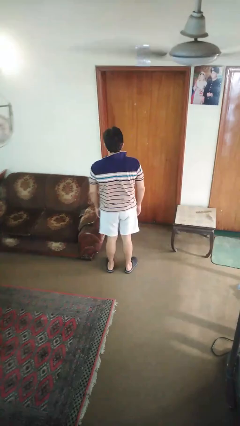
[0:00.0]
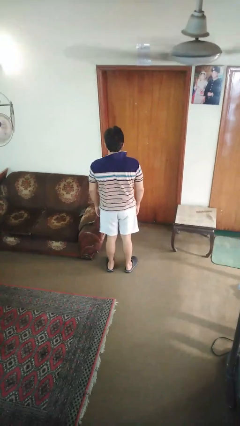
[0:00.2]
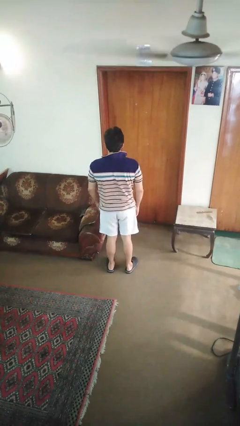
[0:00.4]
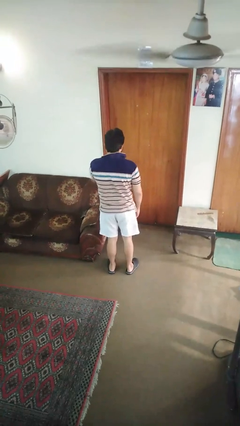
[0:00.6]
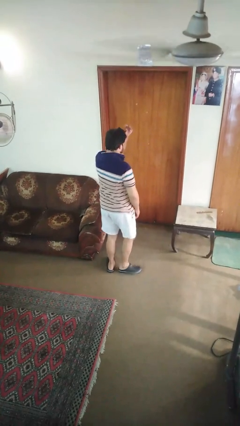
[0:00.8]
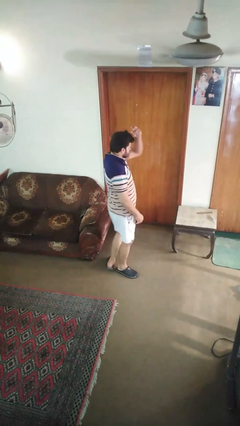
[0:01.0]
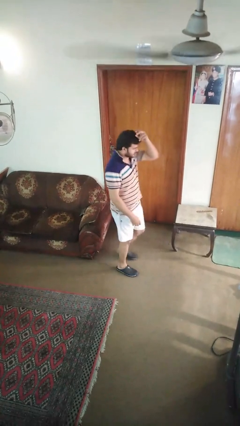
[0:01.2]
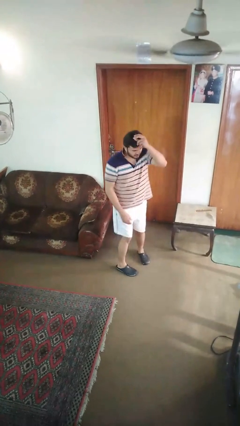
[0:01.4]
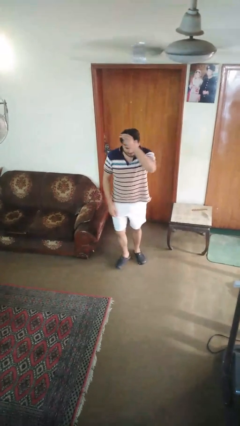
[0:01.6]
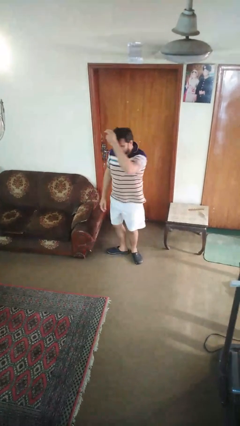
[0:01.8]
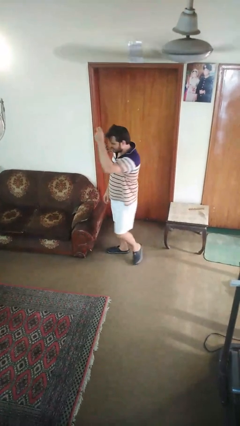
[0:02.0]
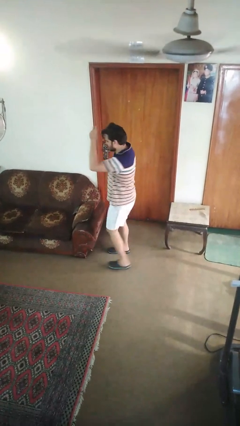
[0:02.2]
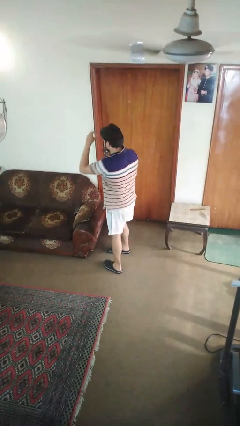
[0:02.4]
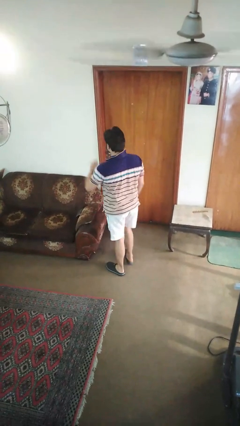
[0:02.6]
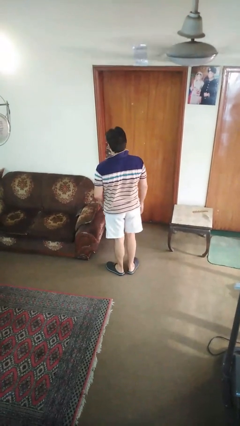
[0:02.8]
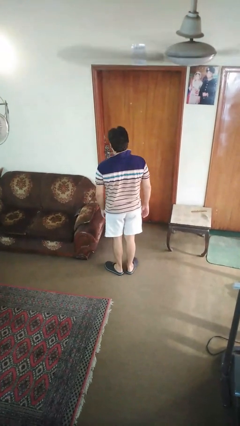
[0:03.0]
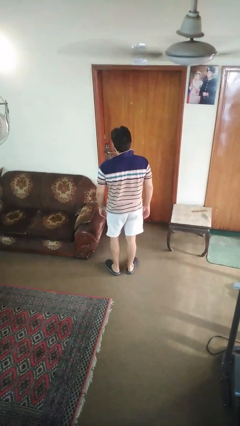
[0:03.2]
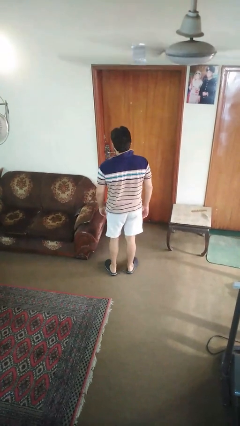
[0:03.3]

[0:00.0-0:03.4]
person twirls

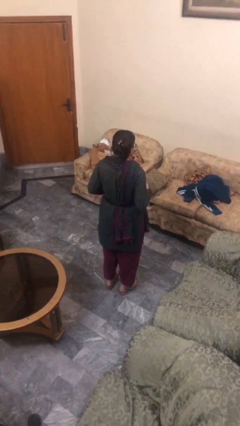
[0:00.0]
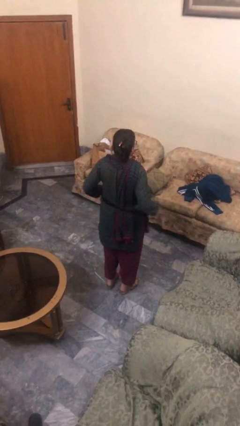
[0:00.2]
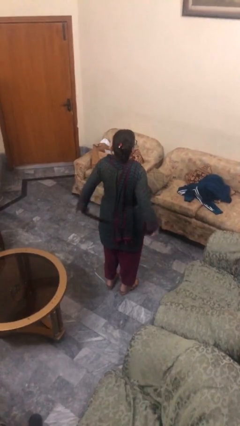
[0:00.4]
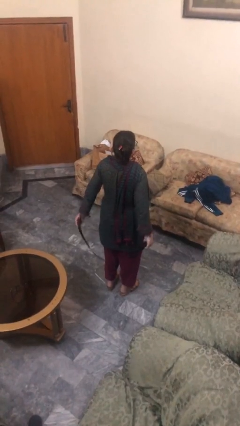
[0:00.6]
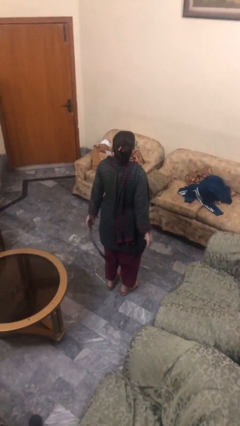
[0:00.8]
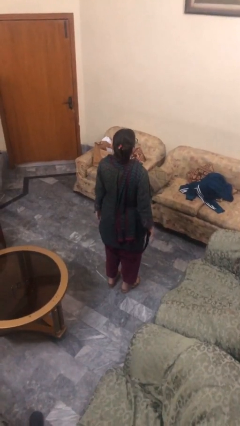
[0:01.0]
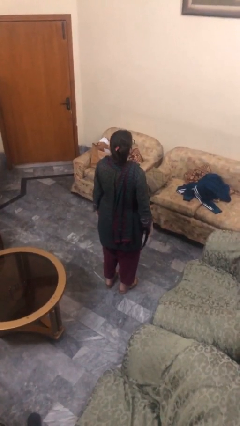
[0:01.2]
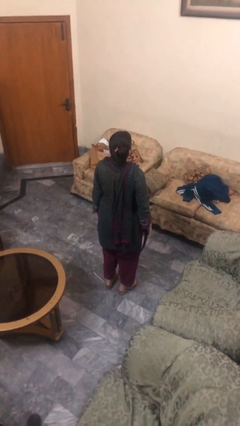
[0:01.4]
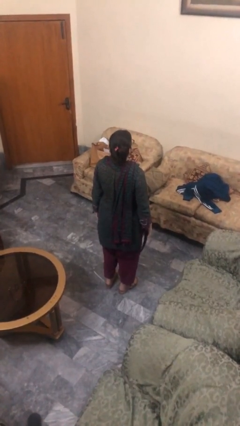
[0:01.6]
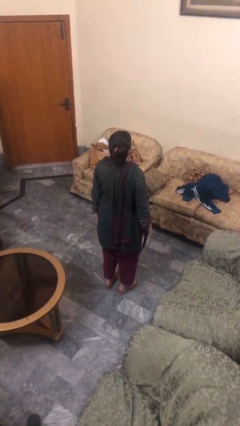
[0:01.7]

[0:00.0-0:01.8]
person takes off belt

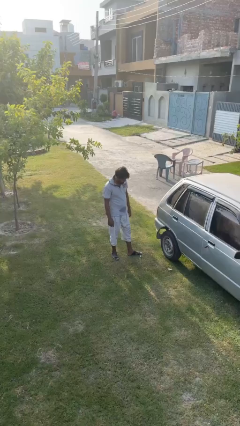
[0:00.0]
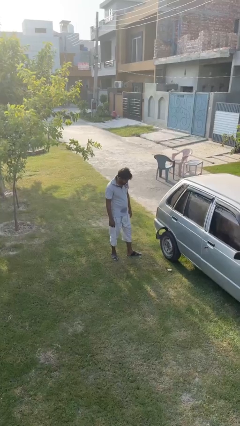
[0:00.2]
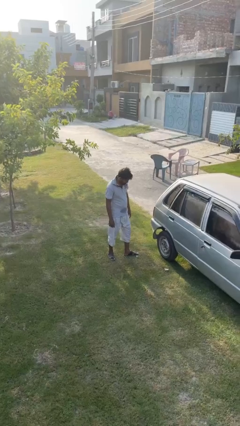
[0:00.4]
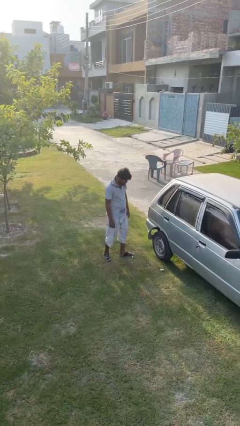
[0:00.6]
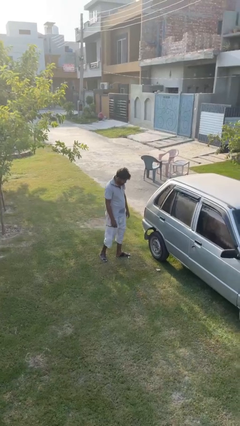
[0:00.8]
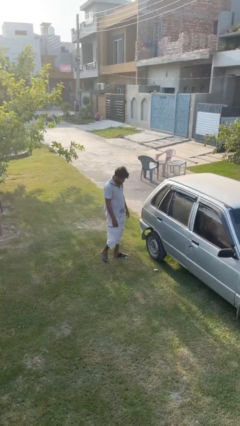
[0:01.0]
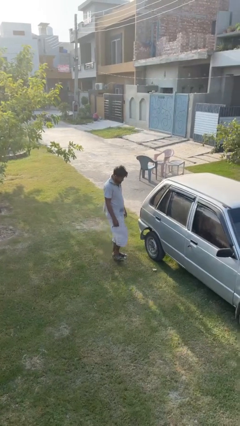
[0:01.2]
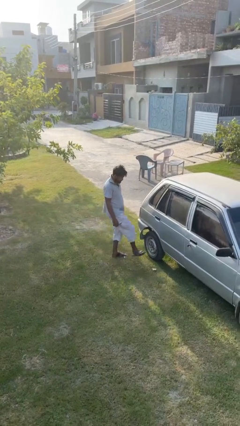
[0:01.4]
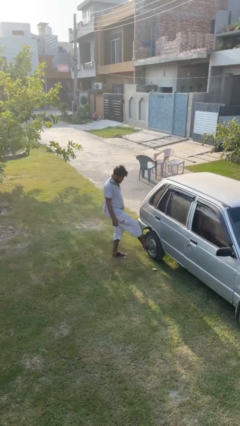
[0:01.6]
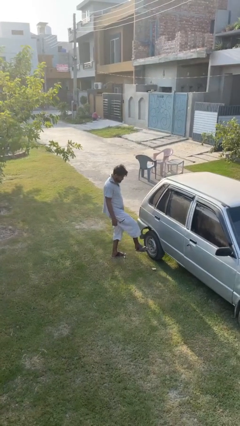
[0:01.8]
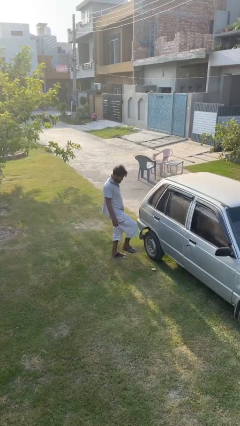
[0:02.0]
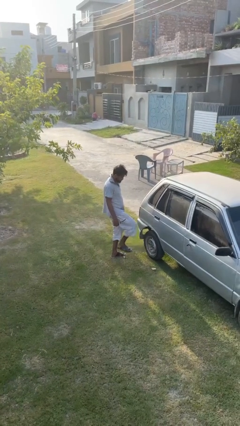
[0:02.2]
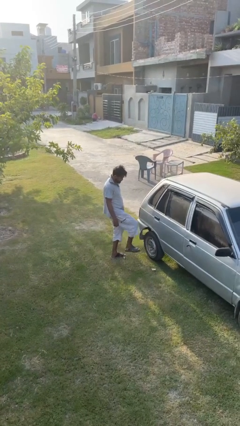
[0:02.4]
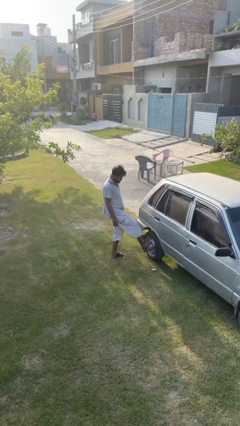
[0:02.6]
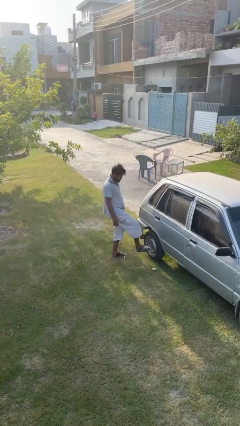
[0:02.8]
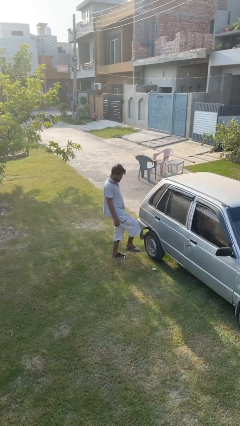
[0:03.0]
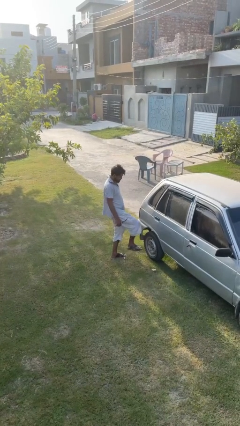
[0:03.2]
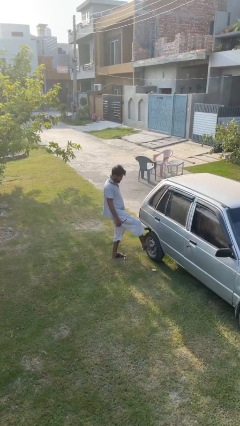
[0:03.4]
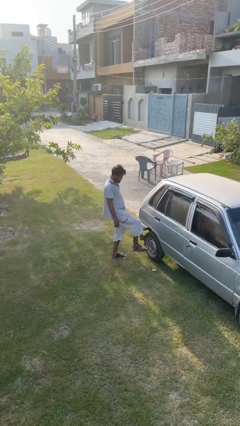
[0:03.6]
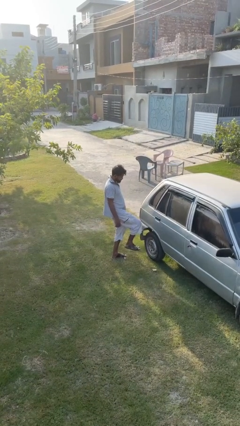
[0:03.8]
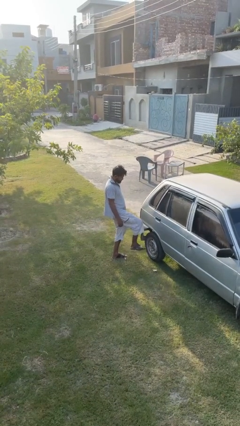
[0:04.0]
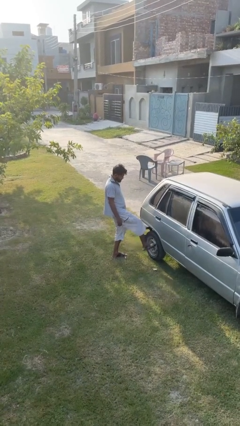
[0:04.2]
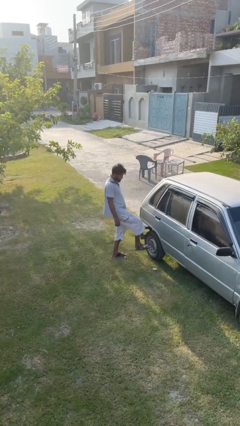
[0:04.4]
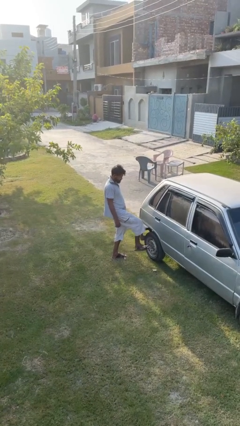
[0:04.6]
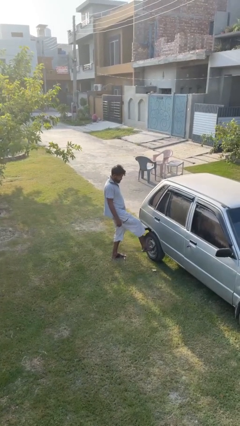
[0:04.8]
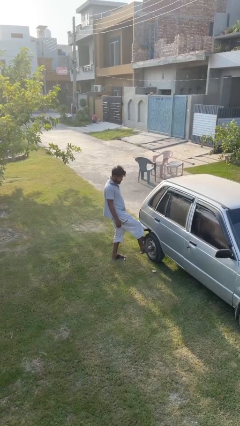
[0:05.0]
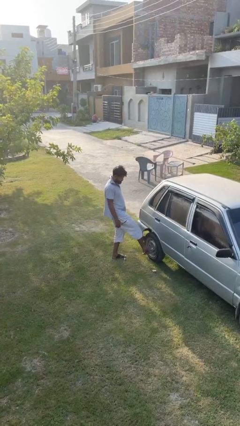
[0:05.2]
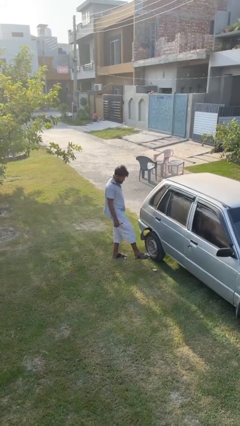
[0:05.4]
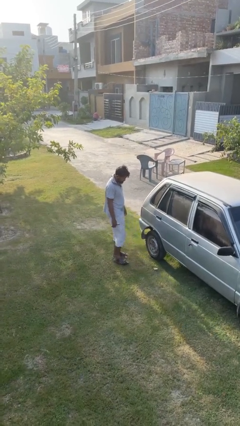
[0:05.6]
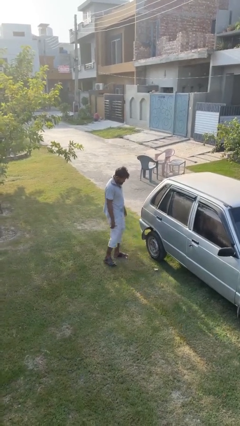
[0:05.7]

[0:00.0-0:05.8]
person kicks car tires

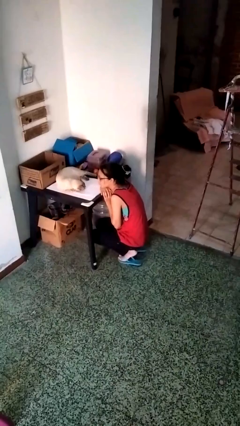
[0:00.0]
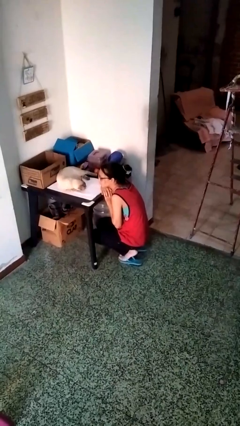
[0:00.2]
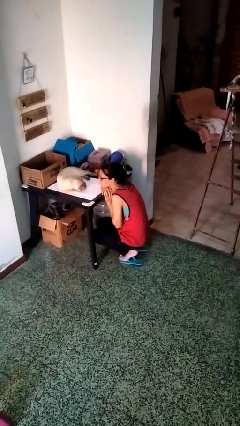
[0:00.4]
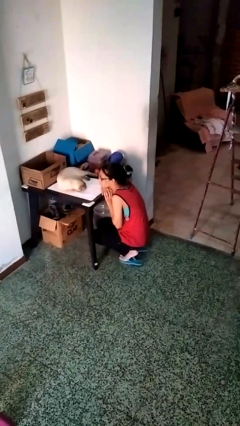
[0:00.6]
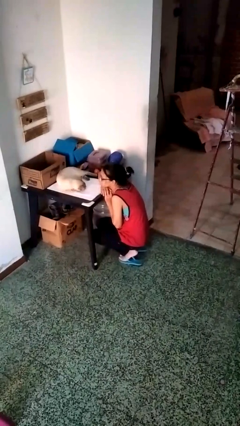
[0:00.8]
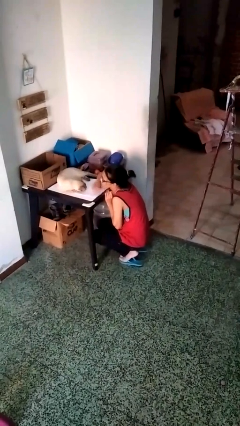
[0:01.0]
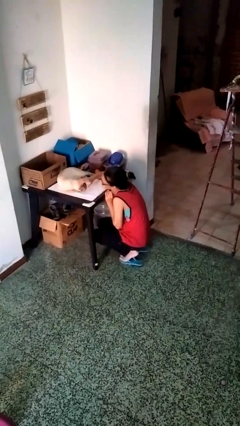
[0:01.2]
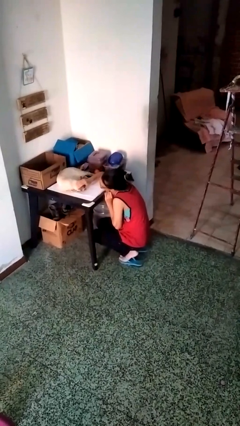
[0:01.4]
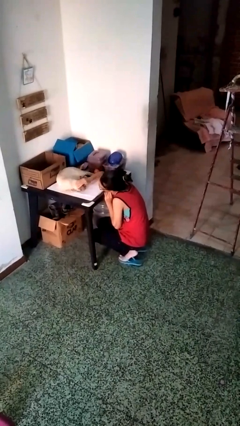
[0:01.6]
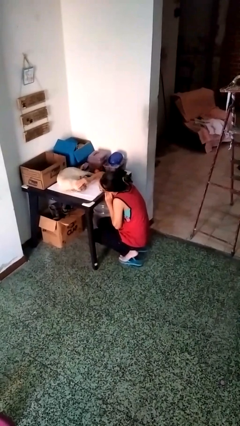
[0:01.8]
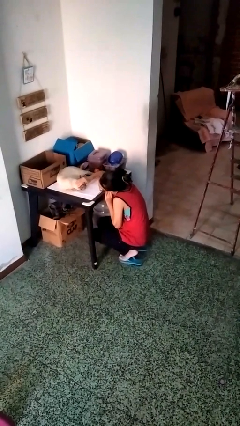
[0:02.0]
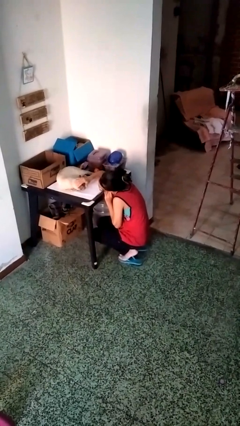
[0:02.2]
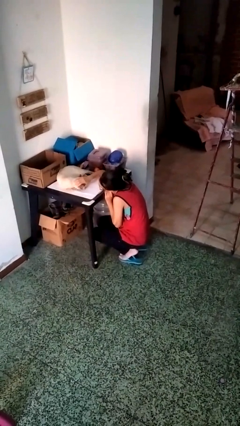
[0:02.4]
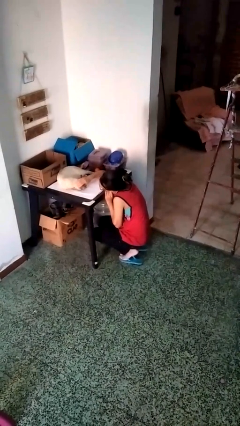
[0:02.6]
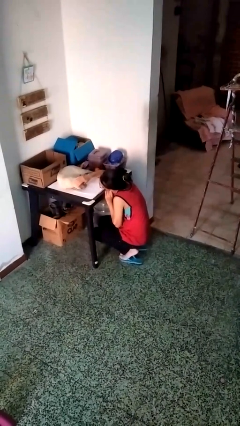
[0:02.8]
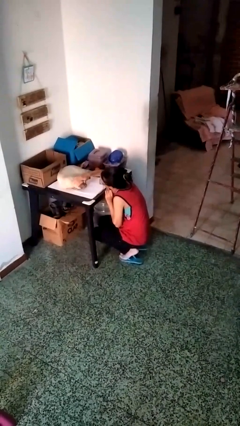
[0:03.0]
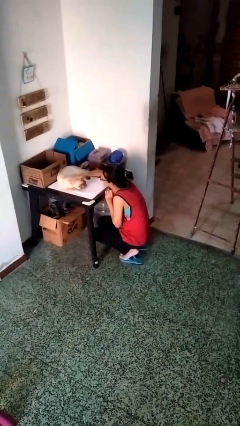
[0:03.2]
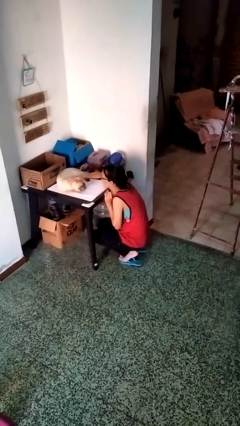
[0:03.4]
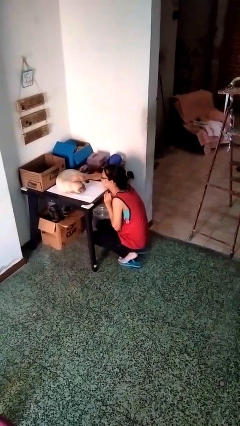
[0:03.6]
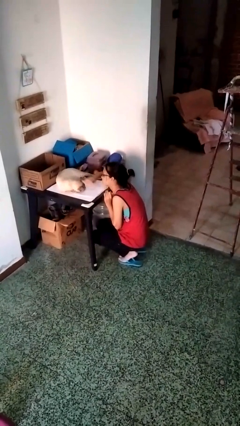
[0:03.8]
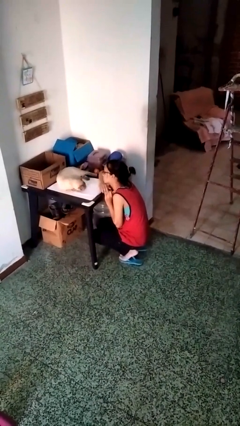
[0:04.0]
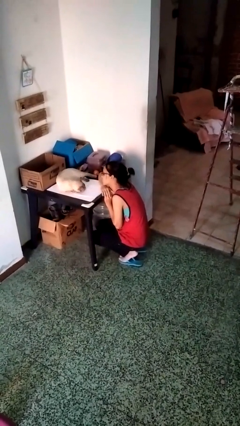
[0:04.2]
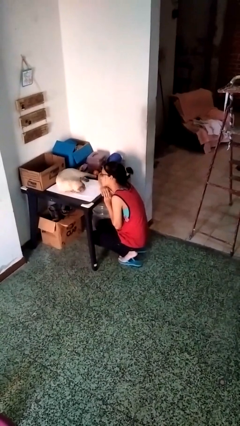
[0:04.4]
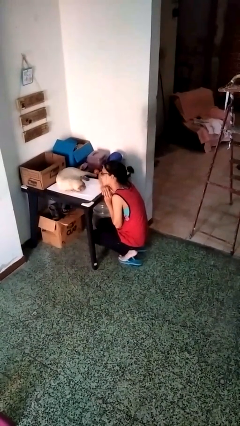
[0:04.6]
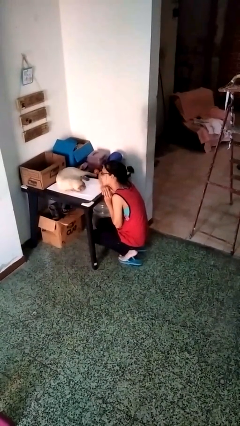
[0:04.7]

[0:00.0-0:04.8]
person pets cat

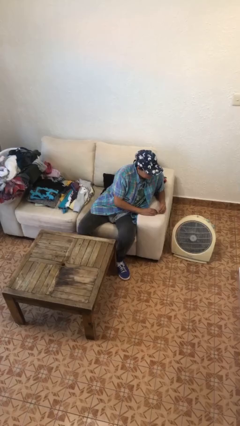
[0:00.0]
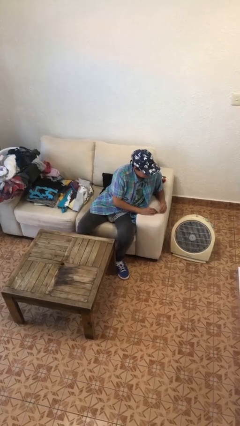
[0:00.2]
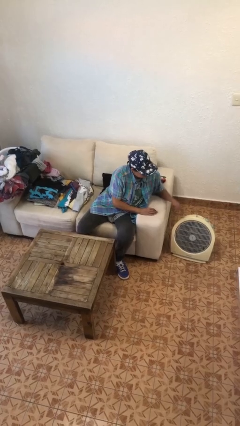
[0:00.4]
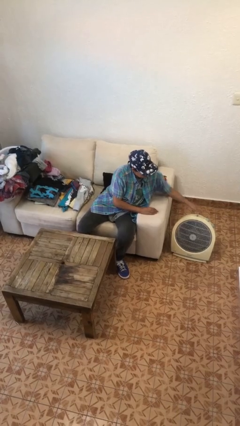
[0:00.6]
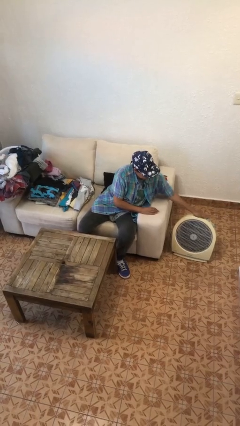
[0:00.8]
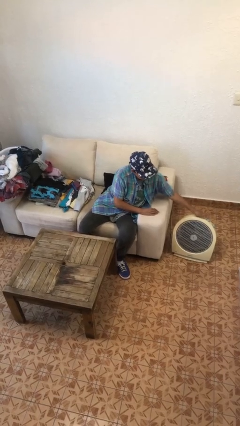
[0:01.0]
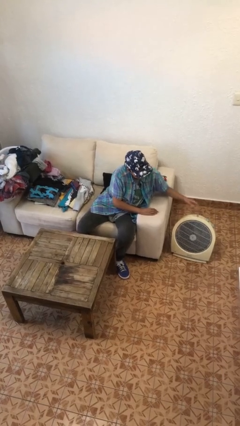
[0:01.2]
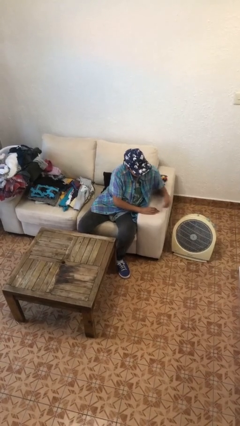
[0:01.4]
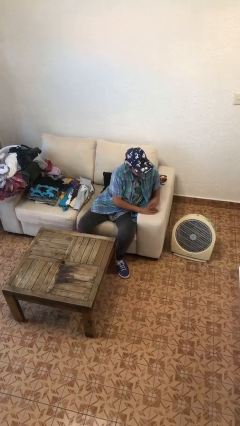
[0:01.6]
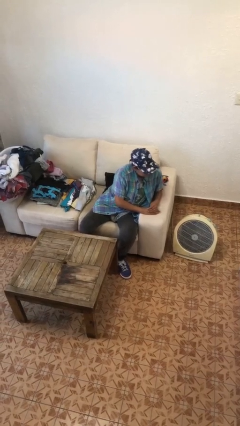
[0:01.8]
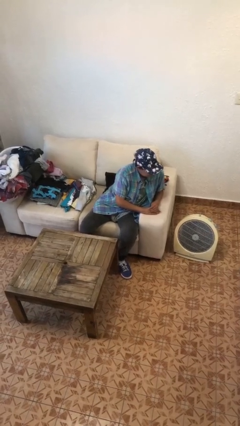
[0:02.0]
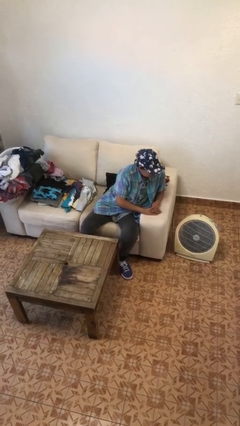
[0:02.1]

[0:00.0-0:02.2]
person turns off fan
